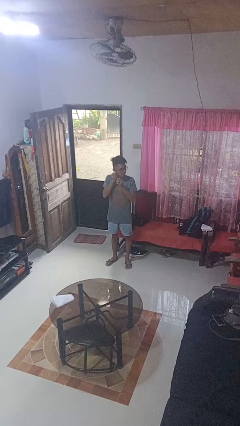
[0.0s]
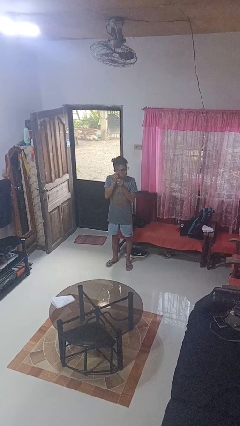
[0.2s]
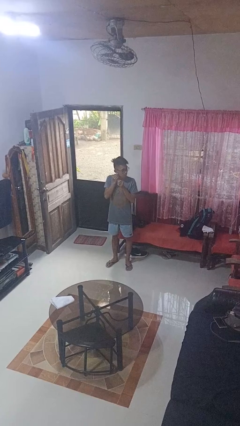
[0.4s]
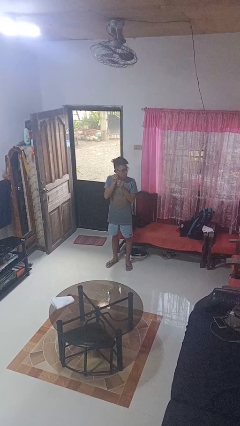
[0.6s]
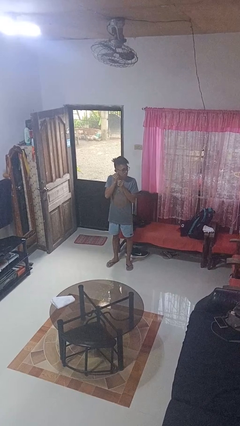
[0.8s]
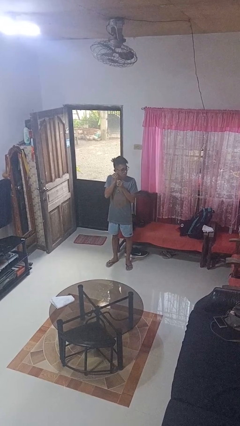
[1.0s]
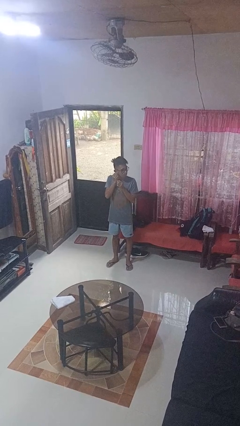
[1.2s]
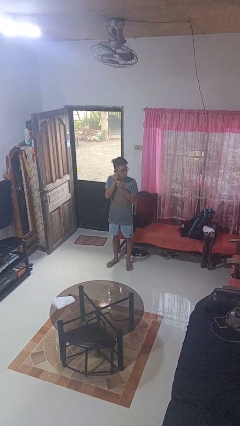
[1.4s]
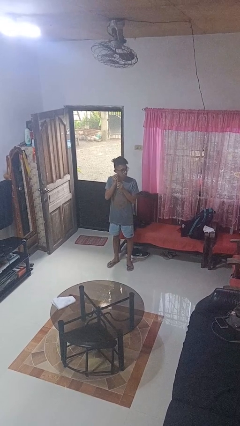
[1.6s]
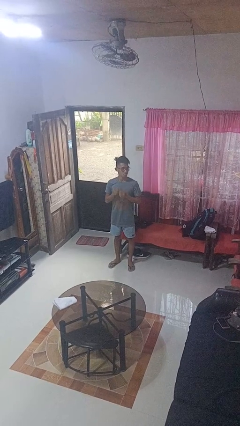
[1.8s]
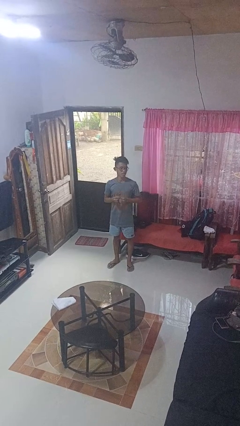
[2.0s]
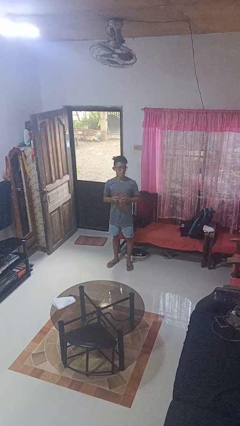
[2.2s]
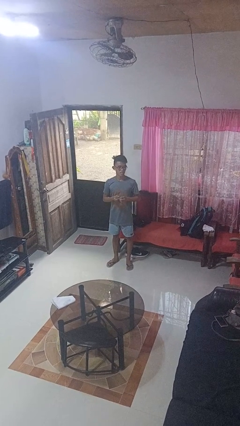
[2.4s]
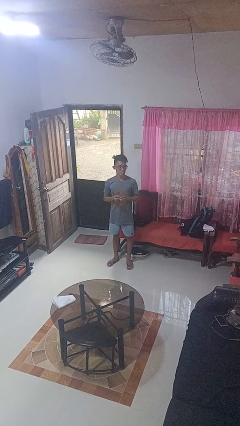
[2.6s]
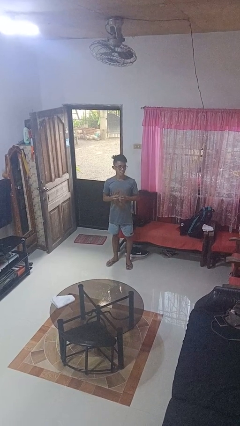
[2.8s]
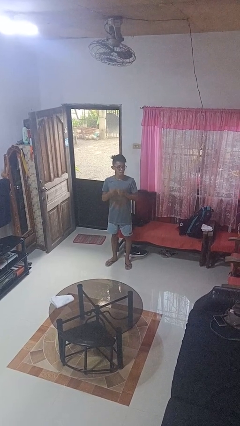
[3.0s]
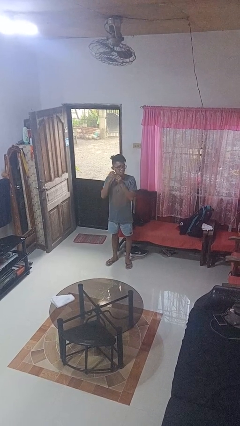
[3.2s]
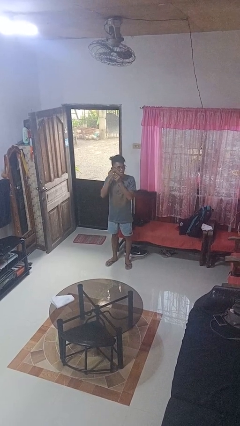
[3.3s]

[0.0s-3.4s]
person puts on earrings

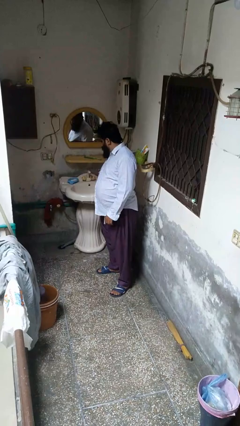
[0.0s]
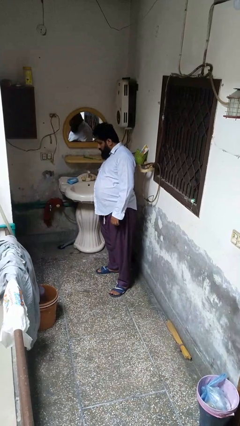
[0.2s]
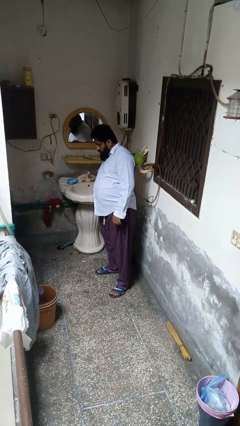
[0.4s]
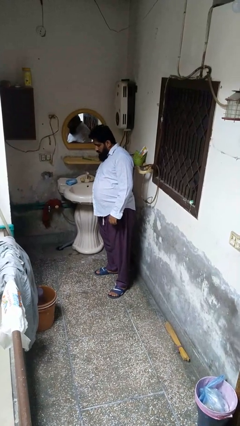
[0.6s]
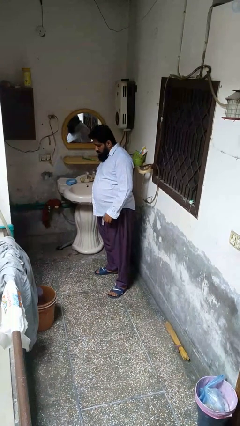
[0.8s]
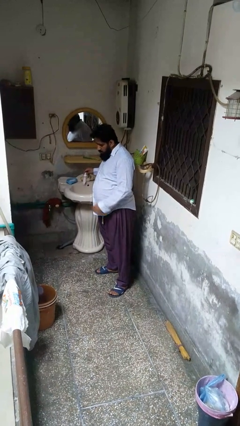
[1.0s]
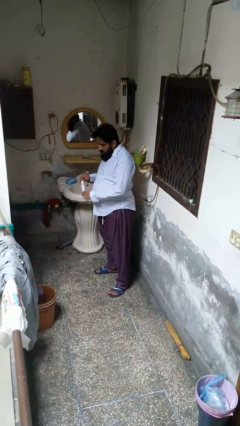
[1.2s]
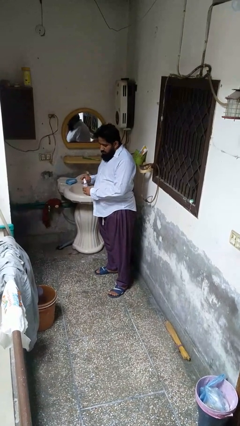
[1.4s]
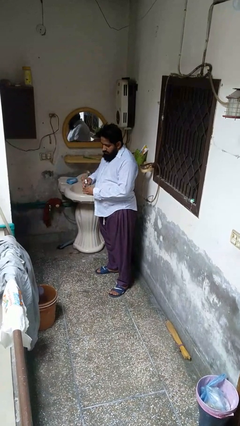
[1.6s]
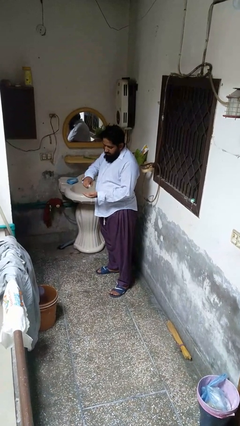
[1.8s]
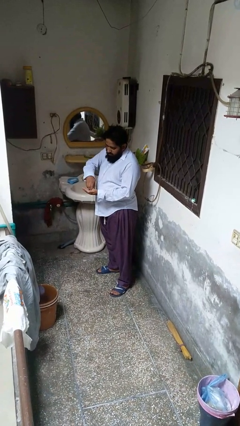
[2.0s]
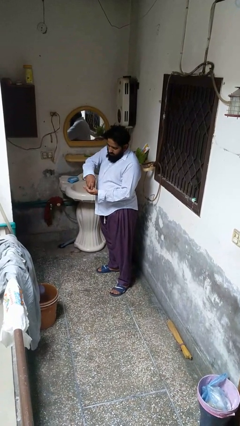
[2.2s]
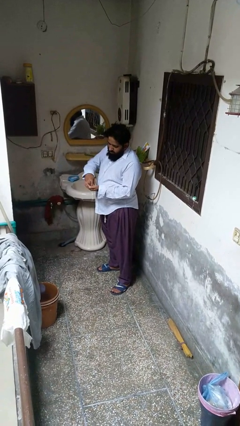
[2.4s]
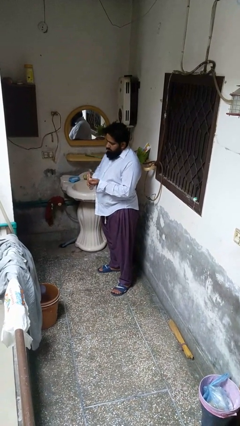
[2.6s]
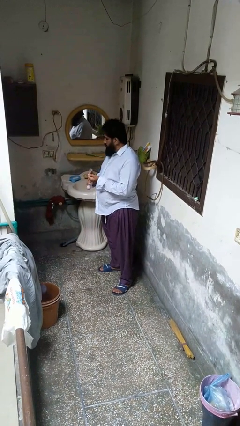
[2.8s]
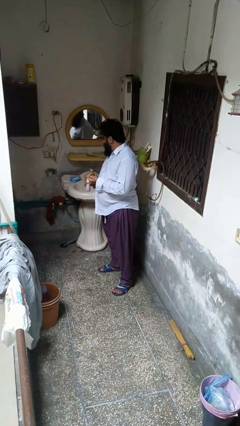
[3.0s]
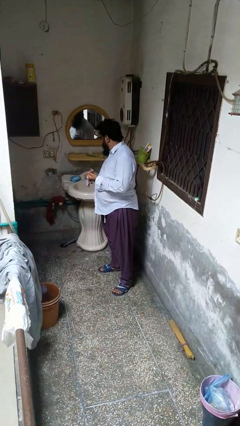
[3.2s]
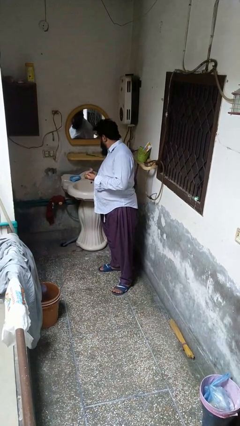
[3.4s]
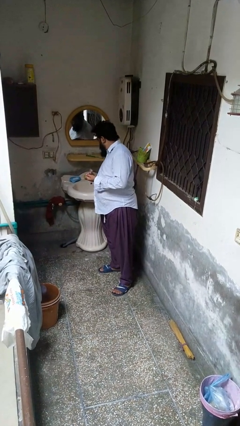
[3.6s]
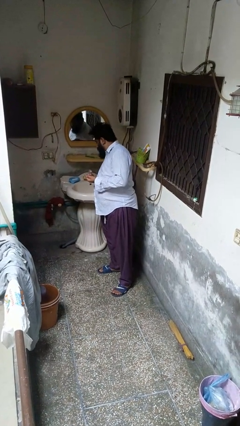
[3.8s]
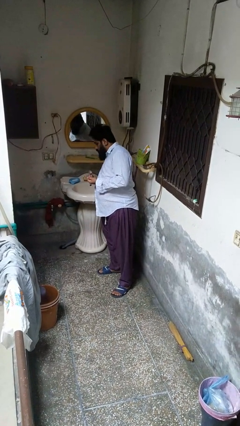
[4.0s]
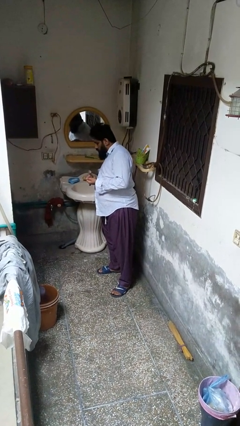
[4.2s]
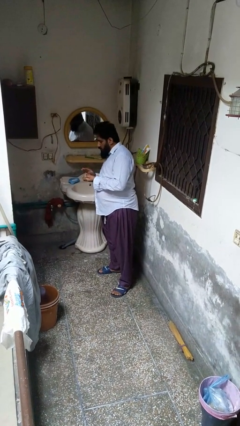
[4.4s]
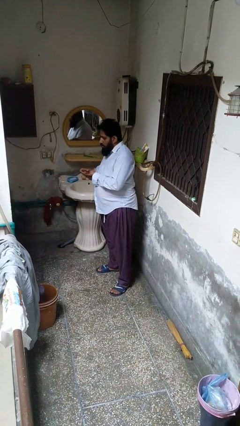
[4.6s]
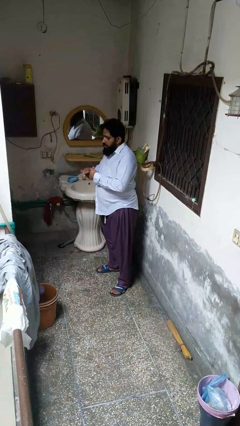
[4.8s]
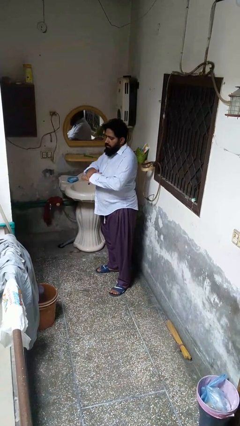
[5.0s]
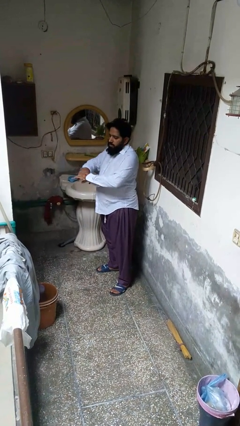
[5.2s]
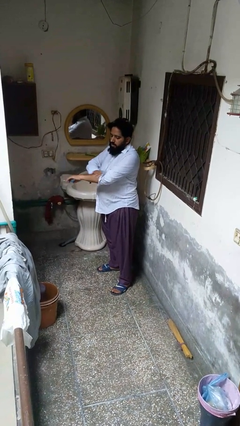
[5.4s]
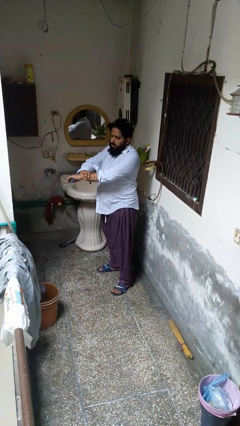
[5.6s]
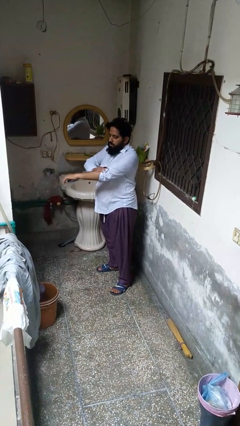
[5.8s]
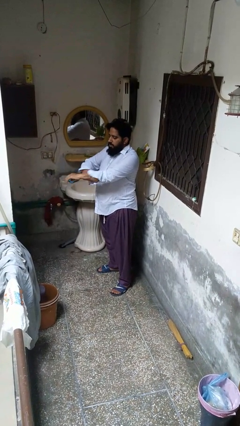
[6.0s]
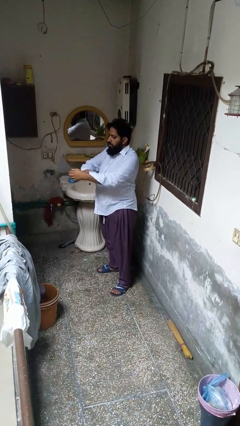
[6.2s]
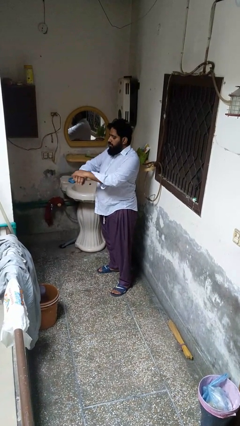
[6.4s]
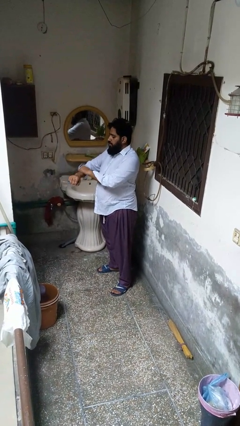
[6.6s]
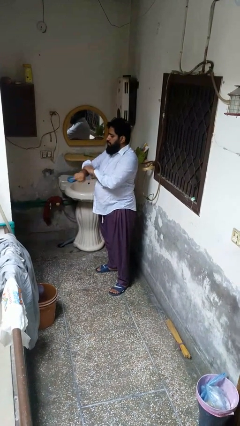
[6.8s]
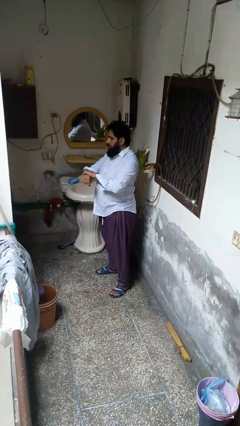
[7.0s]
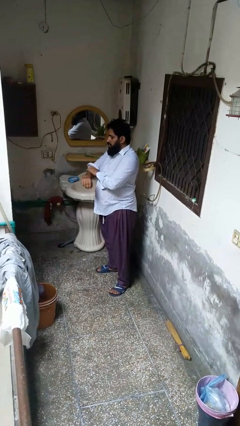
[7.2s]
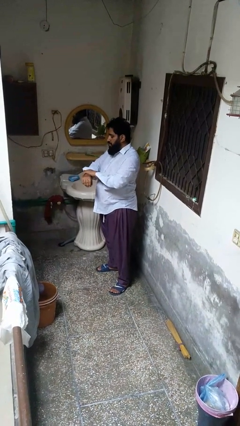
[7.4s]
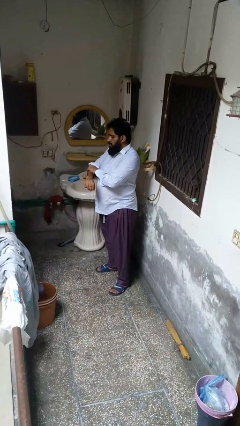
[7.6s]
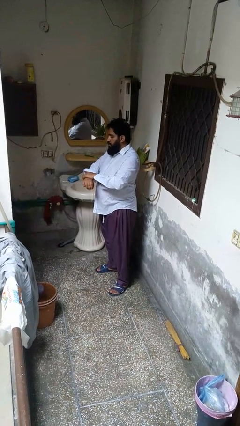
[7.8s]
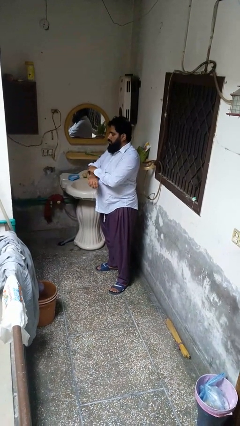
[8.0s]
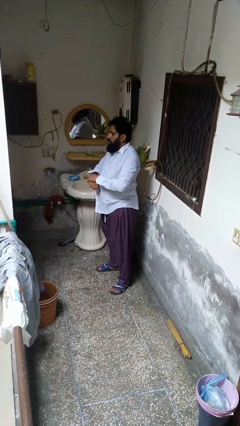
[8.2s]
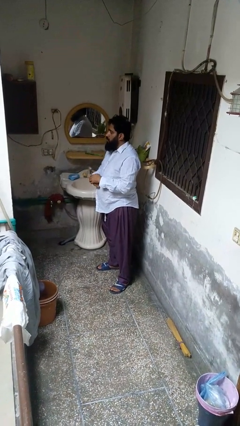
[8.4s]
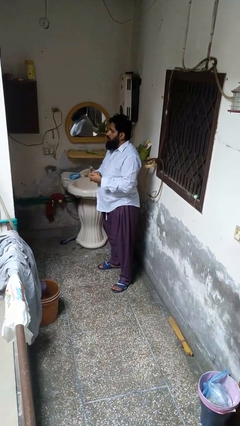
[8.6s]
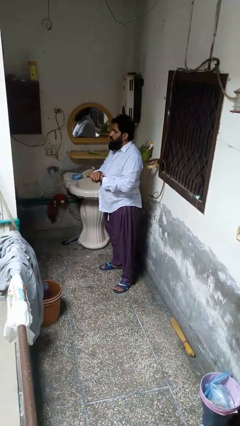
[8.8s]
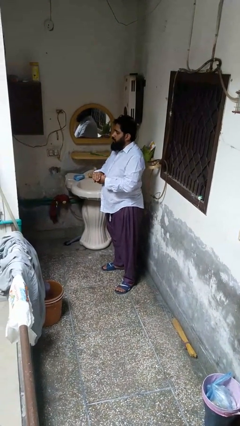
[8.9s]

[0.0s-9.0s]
person applies sunscreen

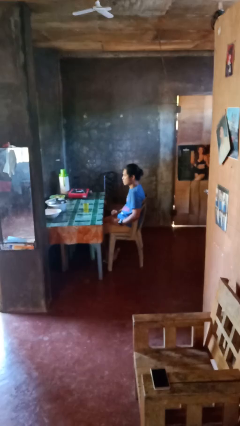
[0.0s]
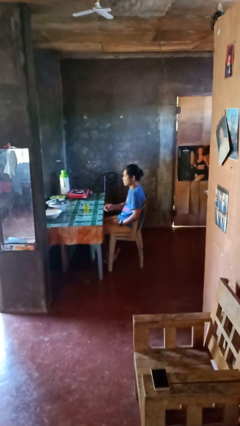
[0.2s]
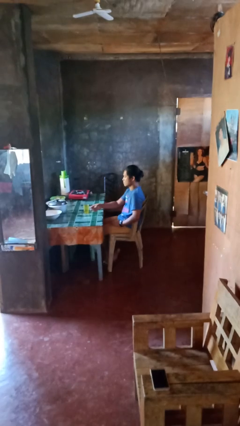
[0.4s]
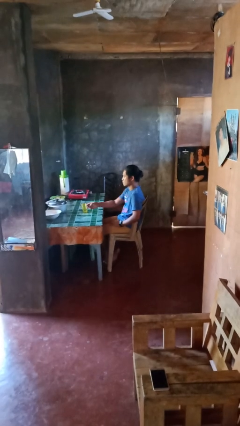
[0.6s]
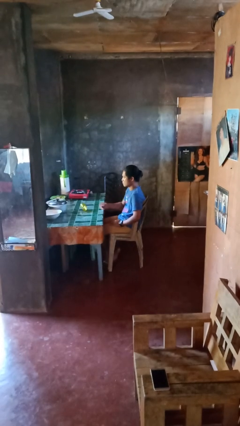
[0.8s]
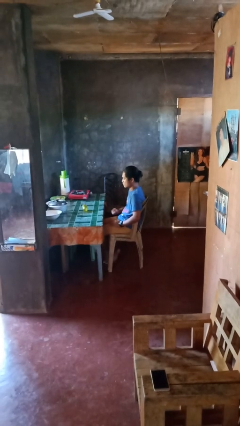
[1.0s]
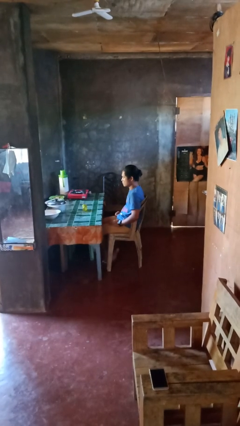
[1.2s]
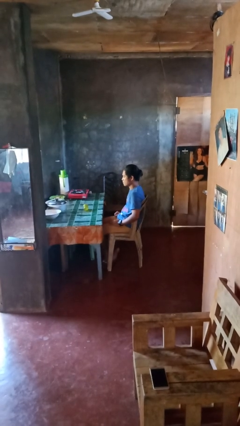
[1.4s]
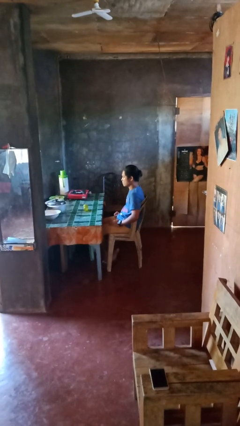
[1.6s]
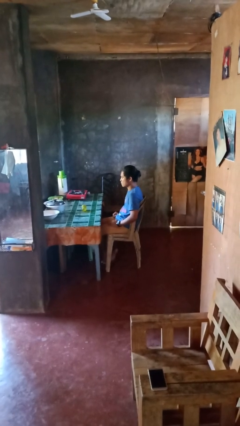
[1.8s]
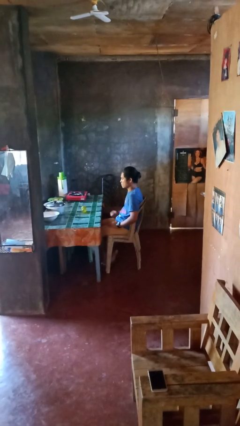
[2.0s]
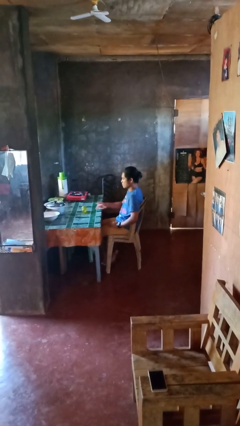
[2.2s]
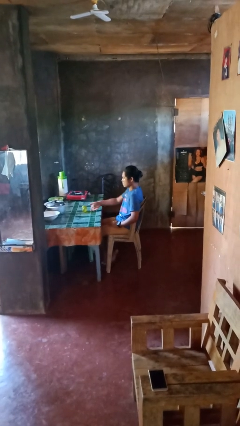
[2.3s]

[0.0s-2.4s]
person knocks over glass

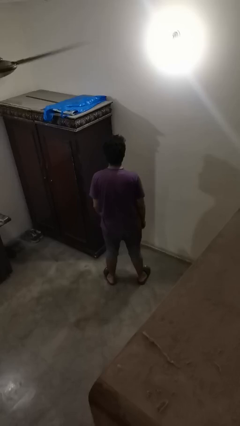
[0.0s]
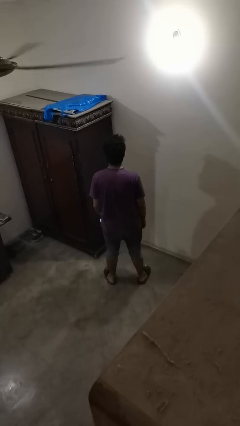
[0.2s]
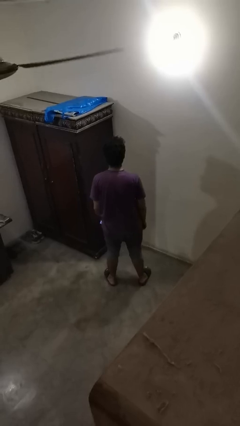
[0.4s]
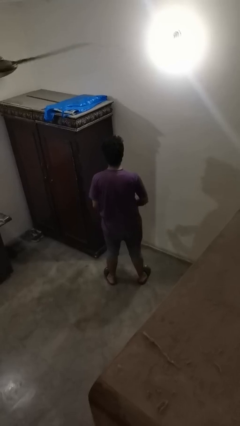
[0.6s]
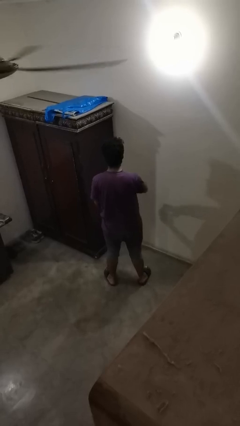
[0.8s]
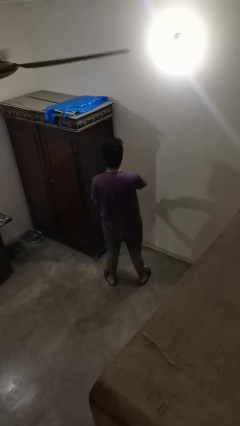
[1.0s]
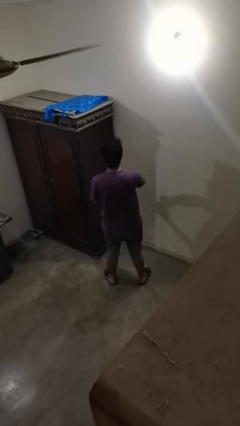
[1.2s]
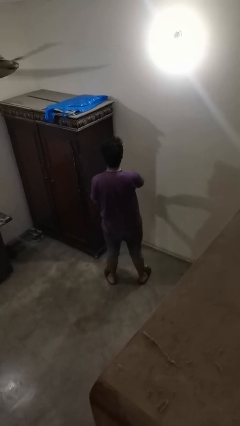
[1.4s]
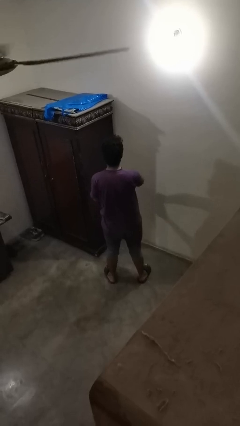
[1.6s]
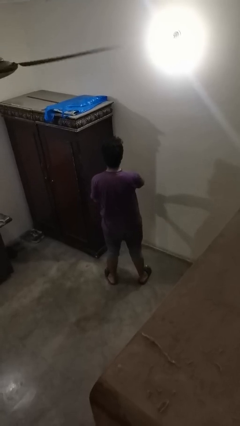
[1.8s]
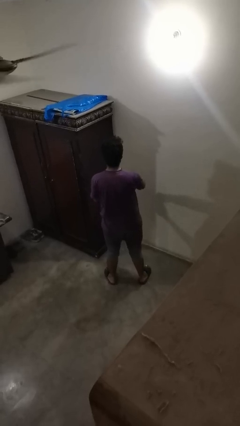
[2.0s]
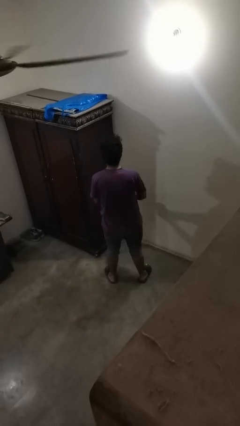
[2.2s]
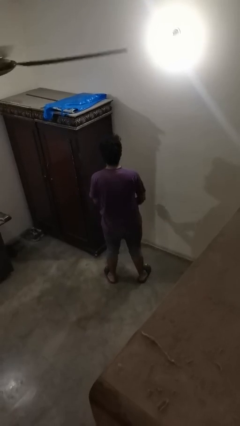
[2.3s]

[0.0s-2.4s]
person opens beverage can

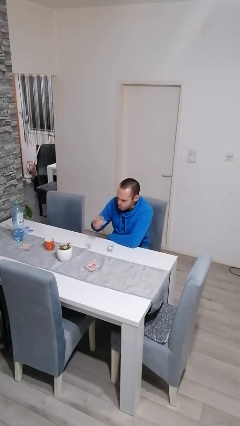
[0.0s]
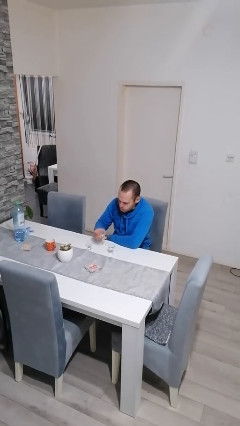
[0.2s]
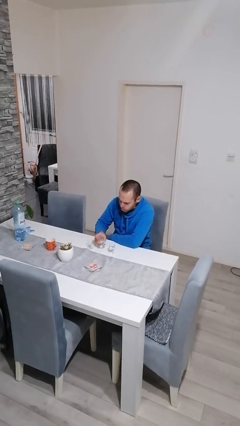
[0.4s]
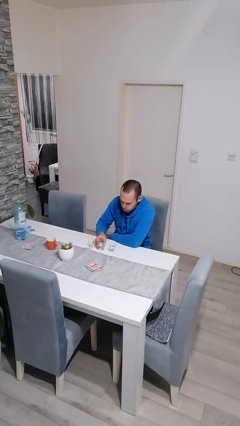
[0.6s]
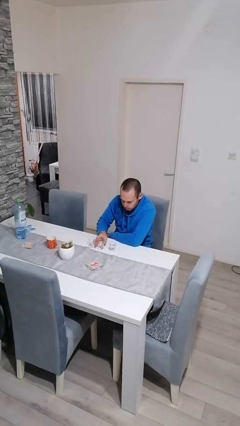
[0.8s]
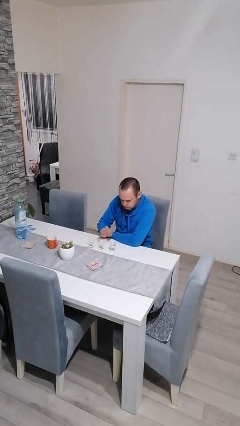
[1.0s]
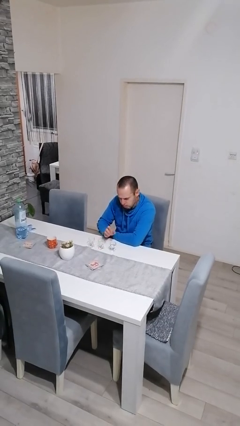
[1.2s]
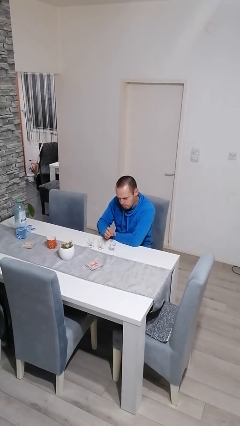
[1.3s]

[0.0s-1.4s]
person puts down object on table
